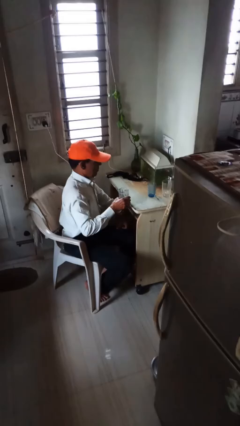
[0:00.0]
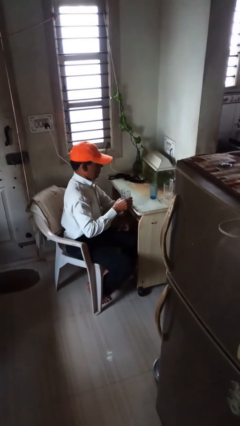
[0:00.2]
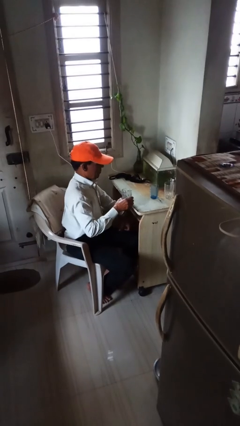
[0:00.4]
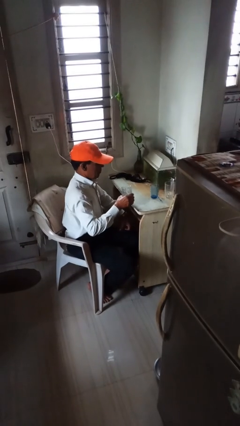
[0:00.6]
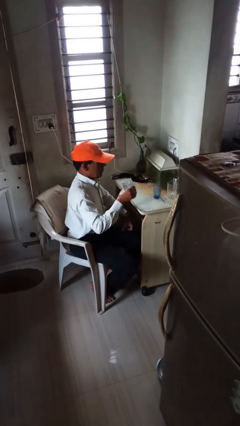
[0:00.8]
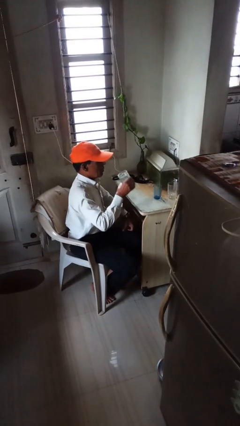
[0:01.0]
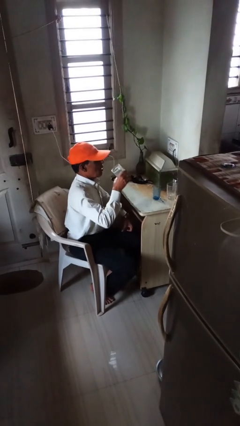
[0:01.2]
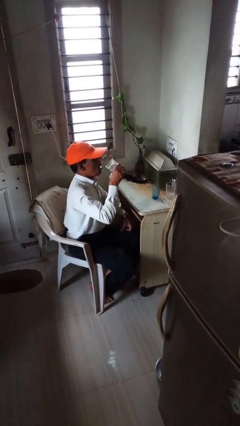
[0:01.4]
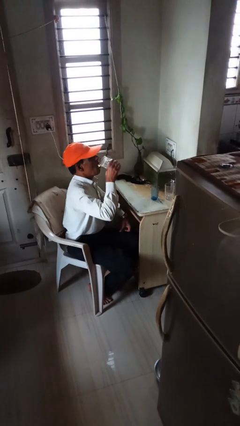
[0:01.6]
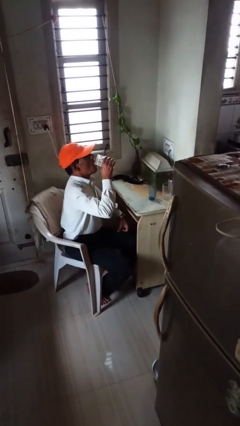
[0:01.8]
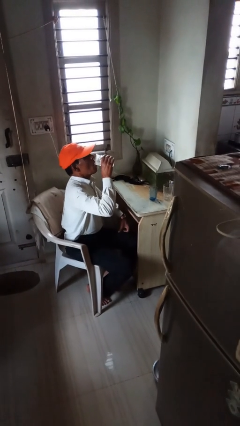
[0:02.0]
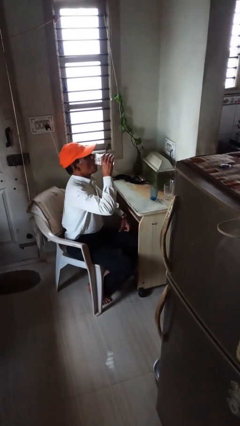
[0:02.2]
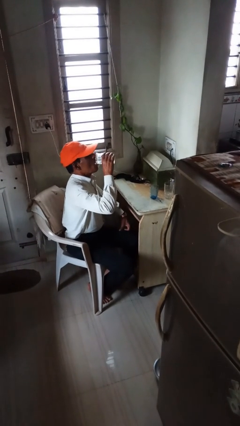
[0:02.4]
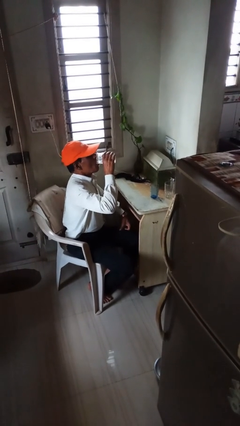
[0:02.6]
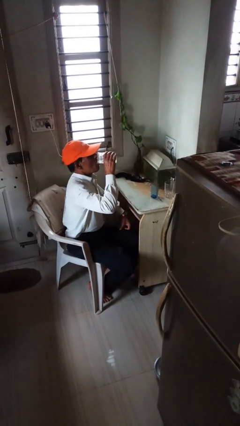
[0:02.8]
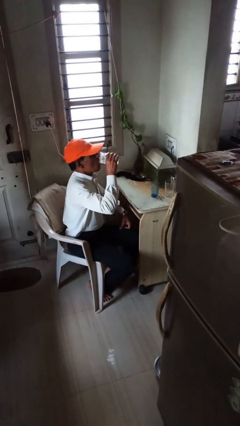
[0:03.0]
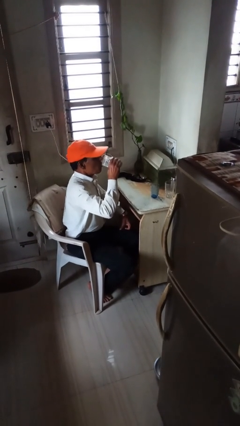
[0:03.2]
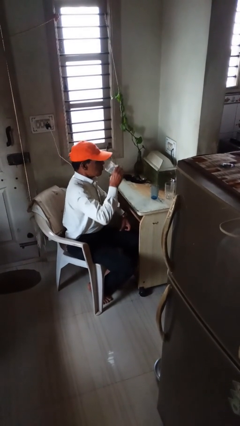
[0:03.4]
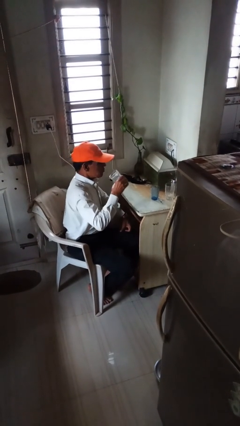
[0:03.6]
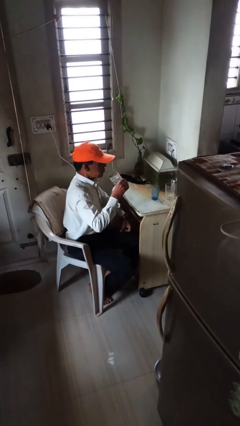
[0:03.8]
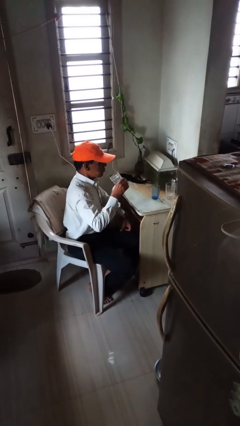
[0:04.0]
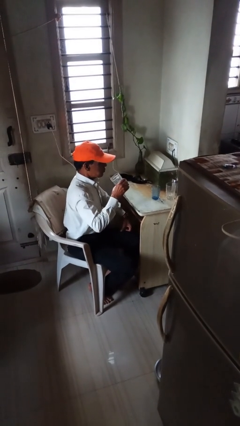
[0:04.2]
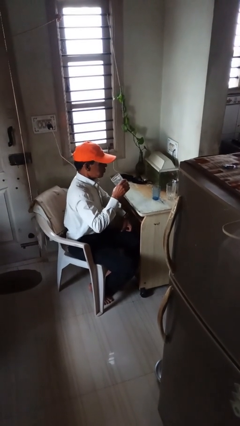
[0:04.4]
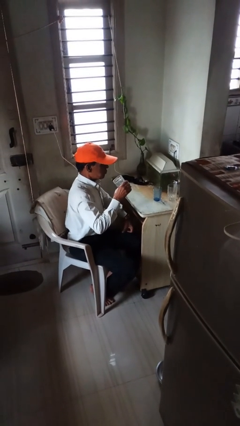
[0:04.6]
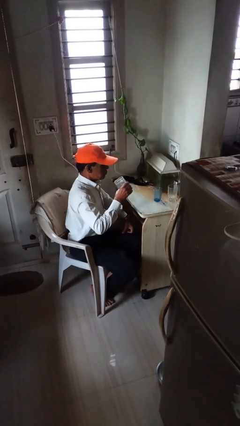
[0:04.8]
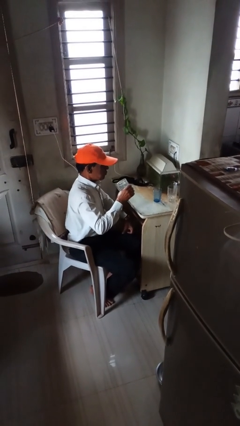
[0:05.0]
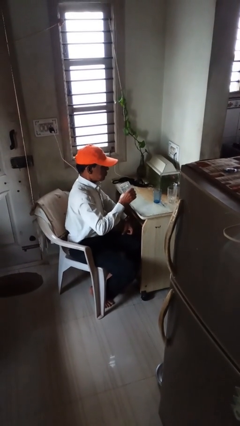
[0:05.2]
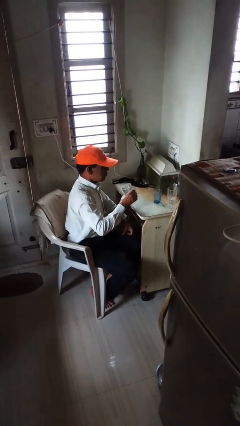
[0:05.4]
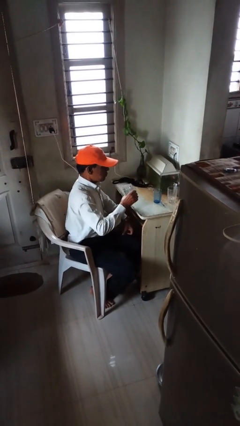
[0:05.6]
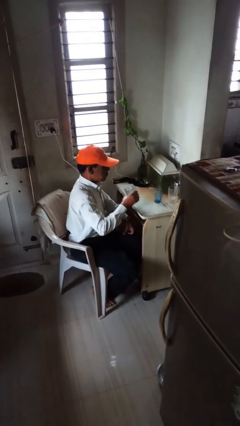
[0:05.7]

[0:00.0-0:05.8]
person drinks from shotglass

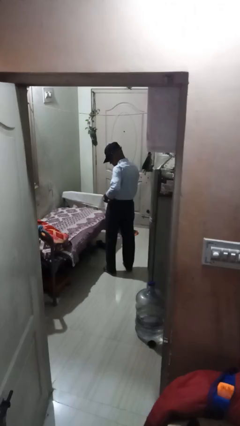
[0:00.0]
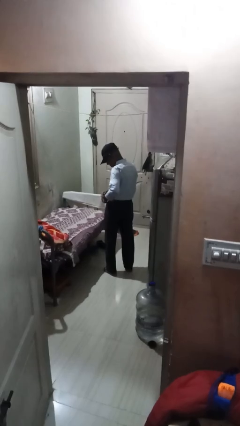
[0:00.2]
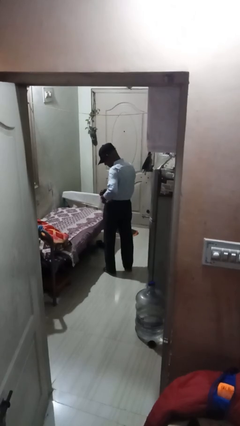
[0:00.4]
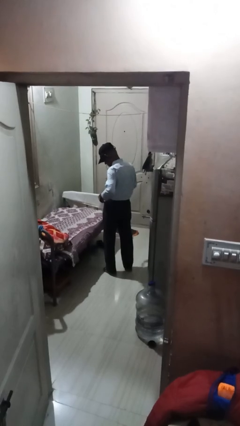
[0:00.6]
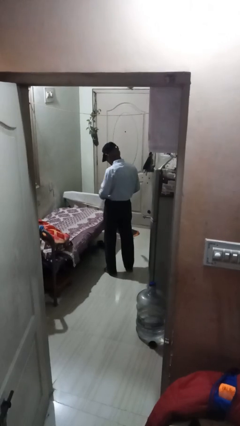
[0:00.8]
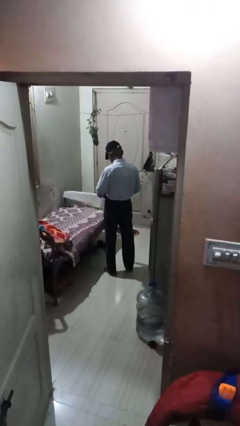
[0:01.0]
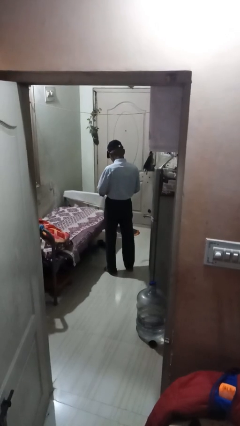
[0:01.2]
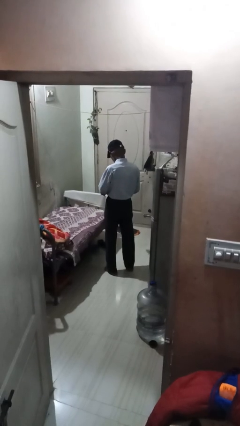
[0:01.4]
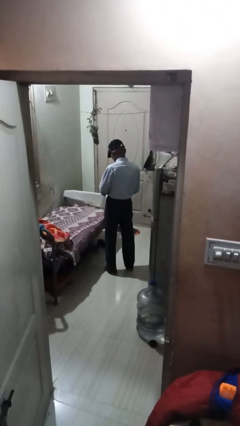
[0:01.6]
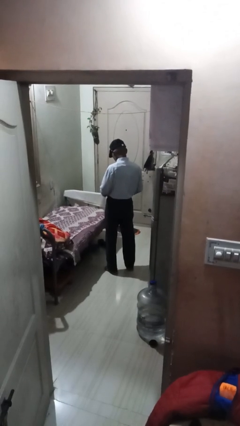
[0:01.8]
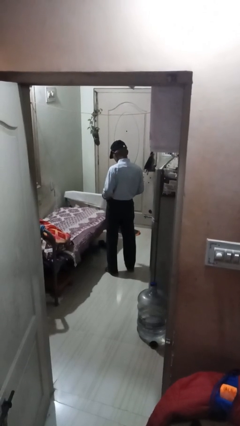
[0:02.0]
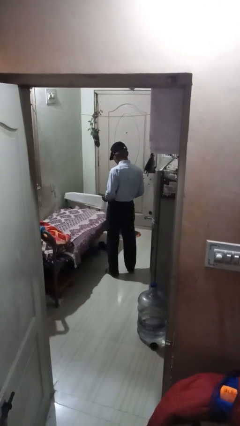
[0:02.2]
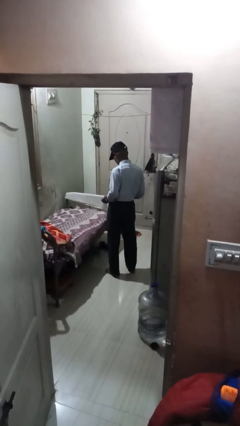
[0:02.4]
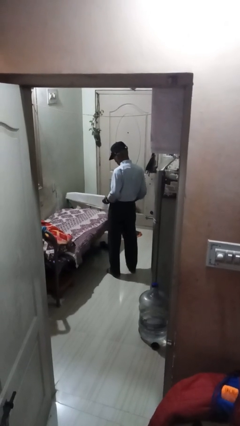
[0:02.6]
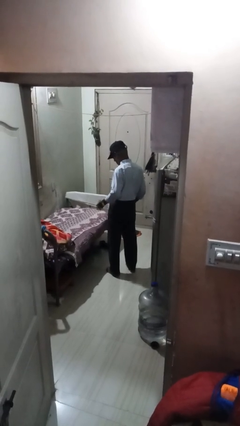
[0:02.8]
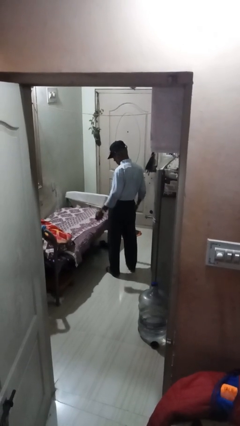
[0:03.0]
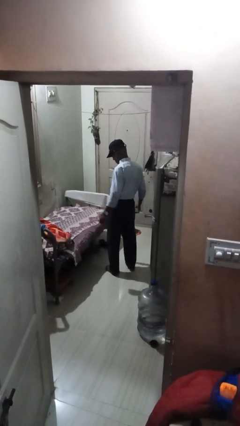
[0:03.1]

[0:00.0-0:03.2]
person takes off belt

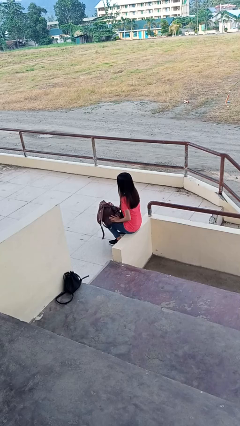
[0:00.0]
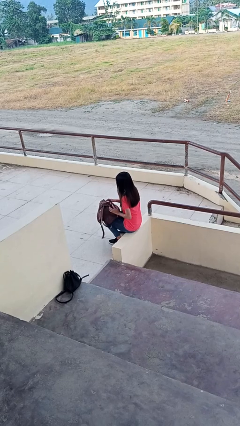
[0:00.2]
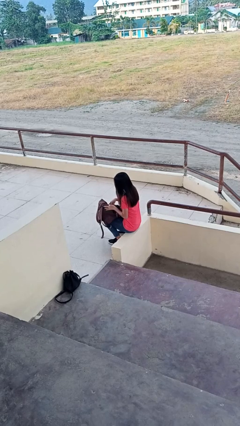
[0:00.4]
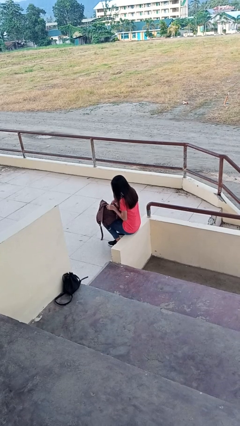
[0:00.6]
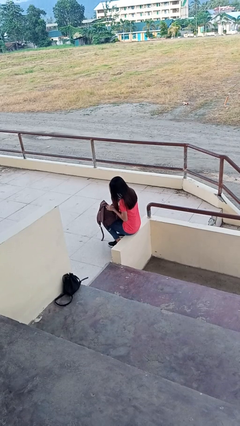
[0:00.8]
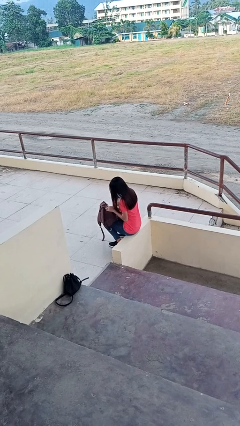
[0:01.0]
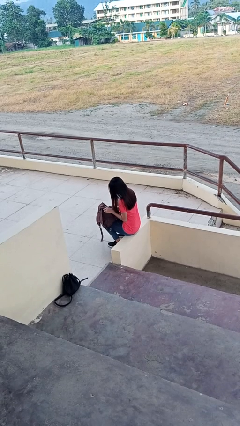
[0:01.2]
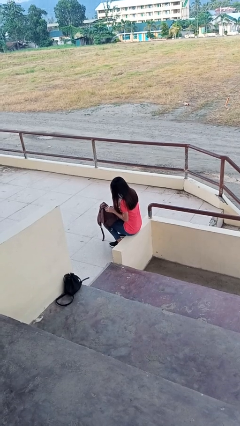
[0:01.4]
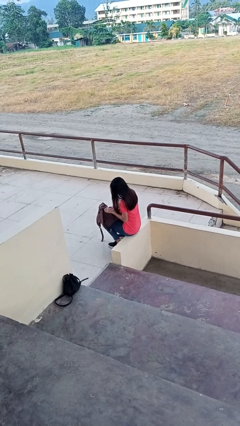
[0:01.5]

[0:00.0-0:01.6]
person searches in backpack

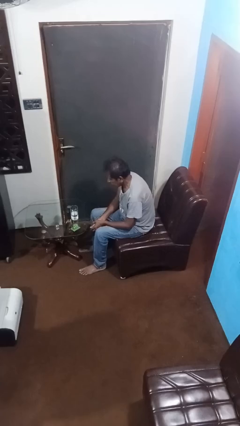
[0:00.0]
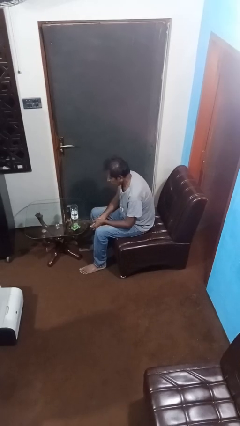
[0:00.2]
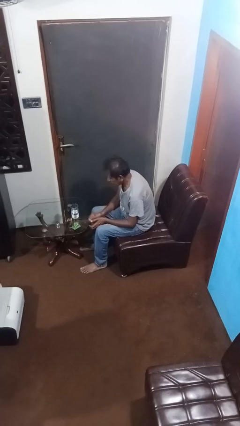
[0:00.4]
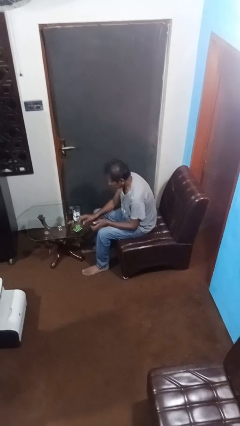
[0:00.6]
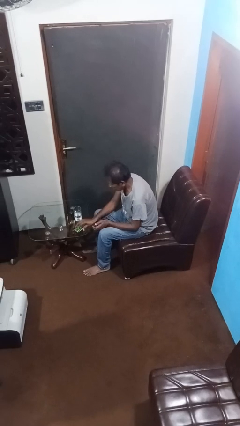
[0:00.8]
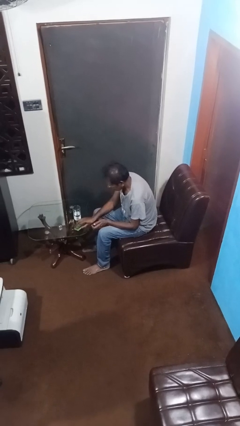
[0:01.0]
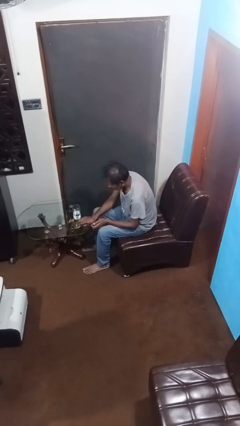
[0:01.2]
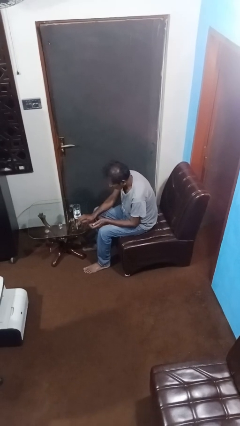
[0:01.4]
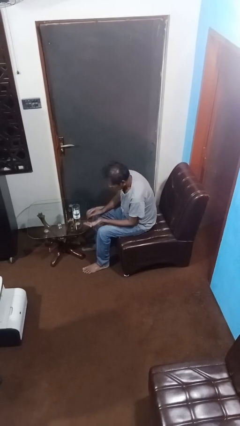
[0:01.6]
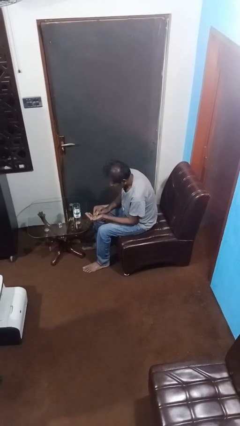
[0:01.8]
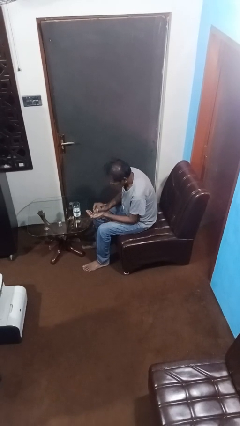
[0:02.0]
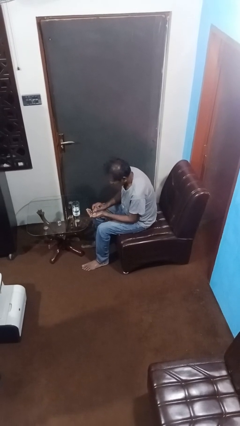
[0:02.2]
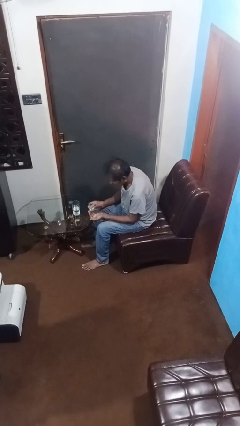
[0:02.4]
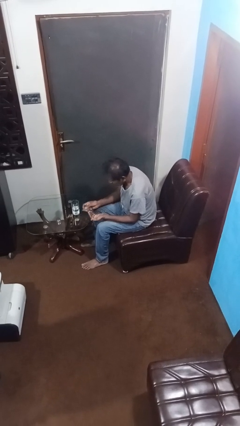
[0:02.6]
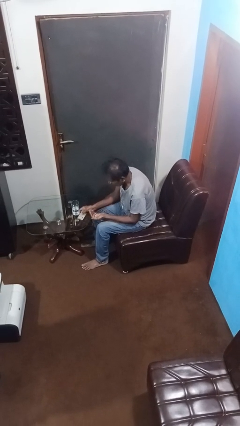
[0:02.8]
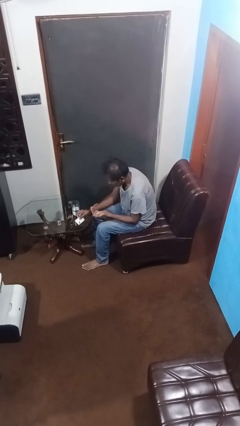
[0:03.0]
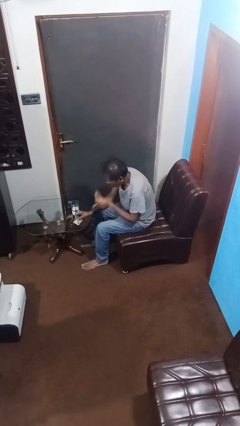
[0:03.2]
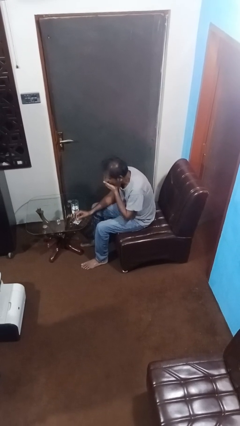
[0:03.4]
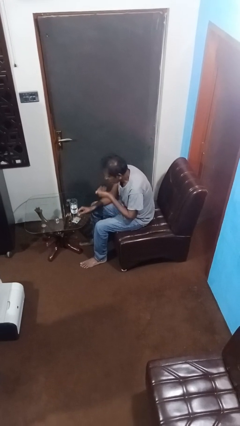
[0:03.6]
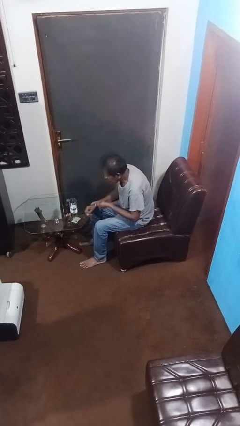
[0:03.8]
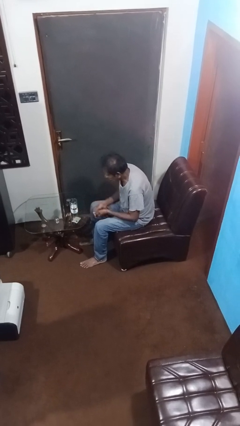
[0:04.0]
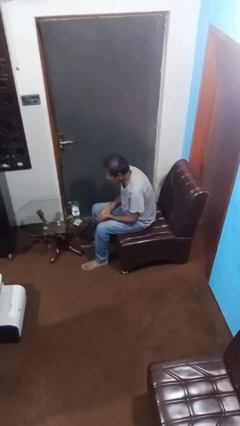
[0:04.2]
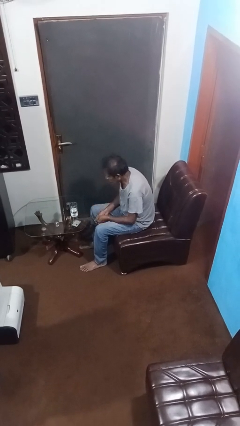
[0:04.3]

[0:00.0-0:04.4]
person takes medicine pills

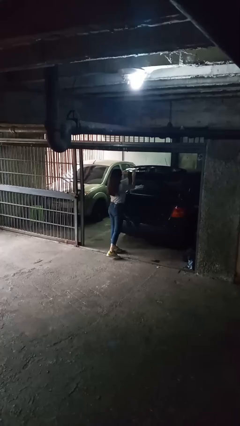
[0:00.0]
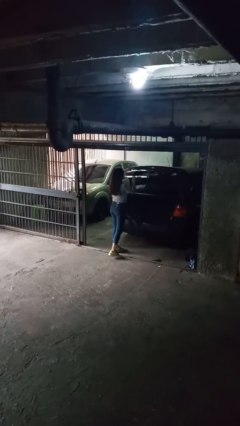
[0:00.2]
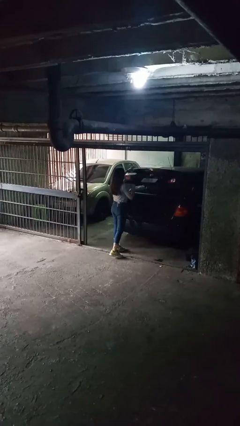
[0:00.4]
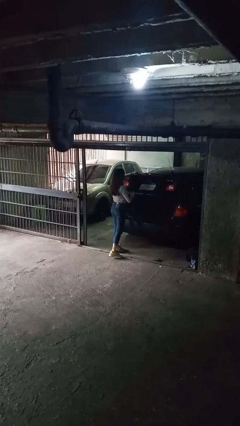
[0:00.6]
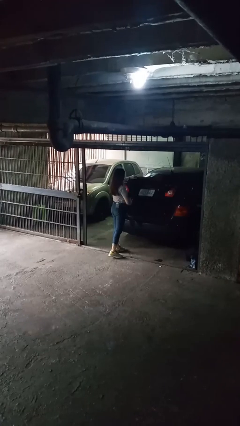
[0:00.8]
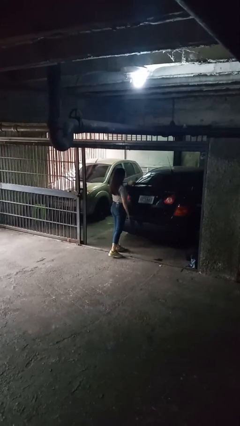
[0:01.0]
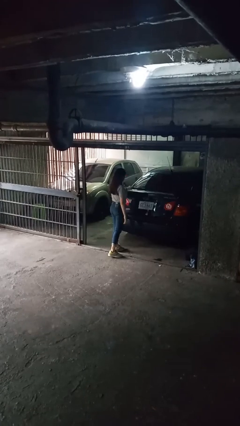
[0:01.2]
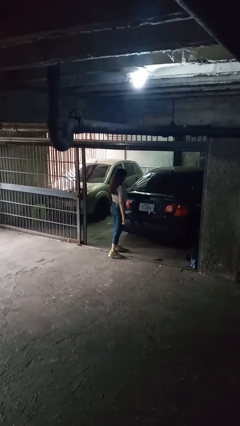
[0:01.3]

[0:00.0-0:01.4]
person closes car trunk

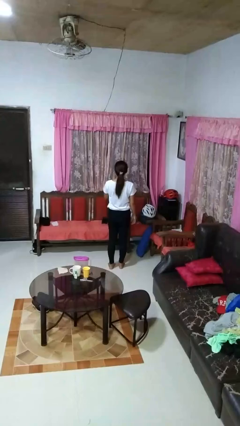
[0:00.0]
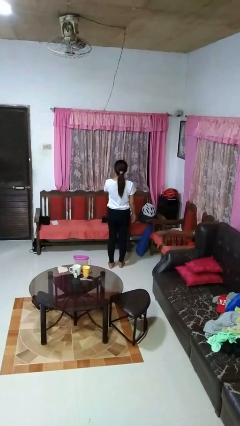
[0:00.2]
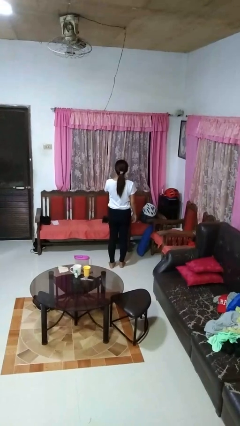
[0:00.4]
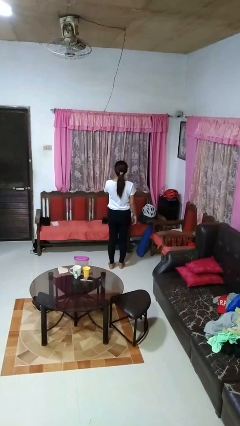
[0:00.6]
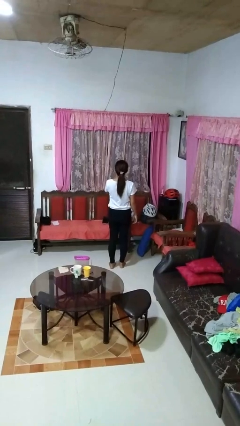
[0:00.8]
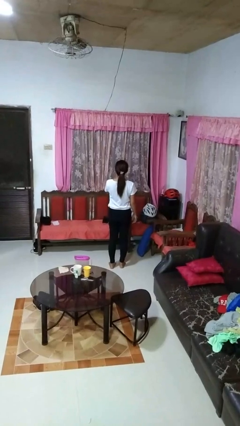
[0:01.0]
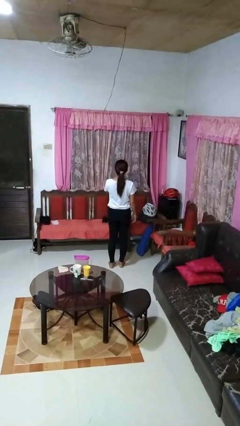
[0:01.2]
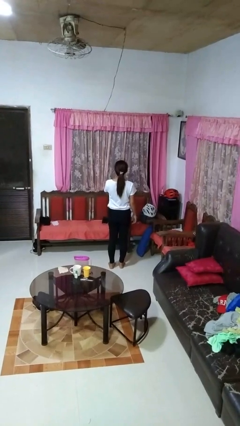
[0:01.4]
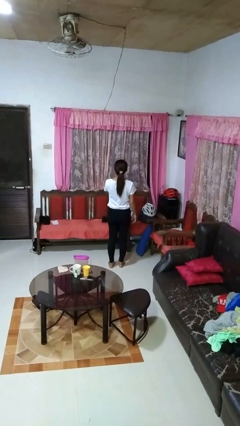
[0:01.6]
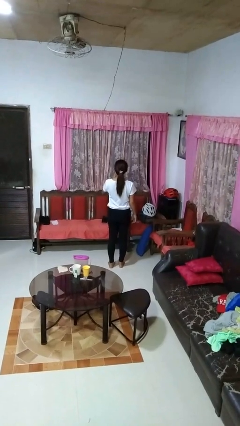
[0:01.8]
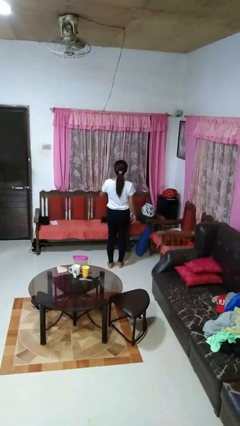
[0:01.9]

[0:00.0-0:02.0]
person gestures be quiet
